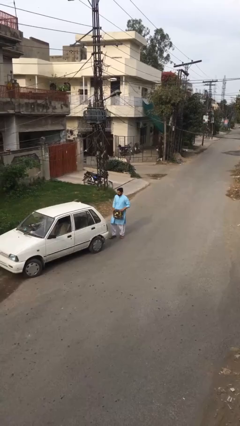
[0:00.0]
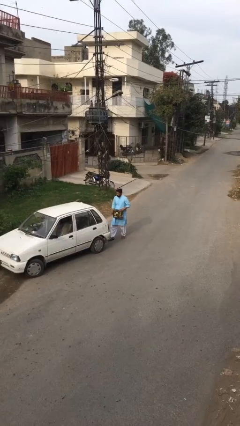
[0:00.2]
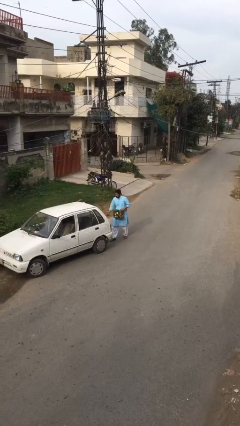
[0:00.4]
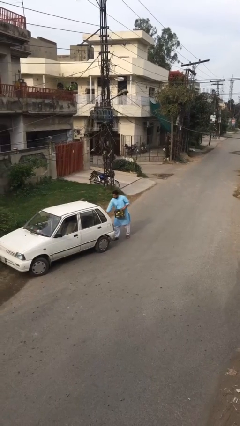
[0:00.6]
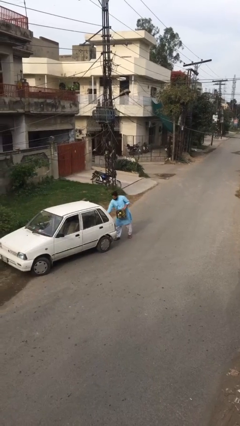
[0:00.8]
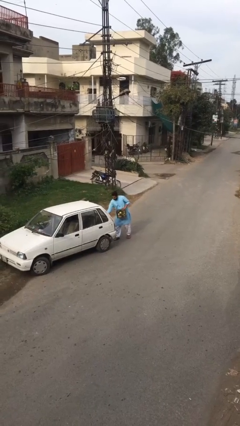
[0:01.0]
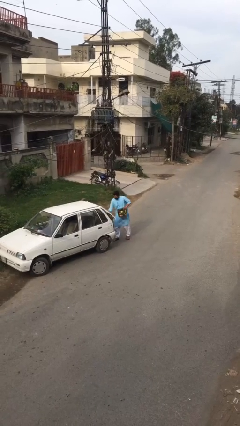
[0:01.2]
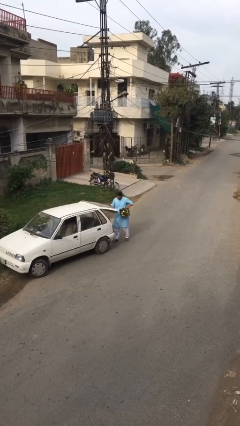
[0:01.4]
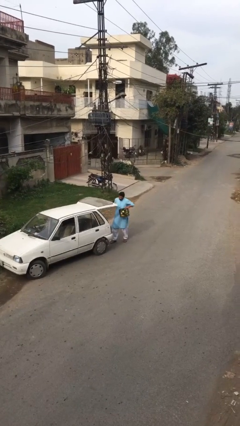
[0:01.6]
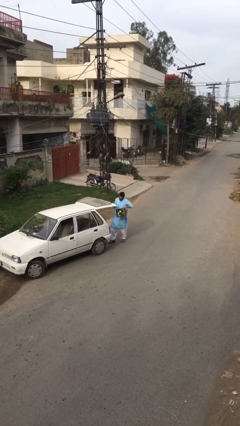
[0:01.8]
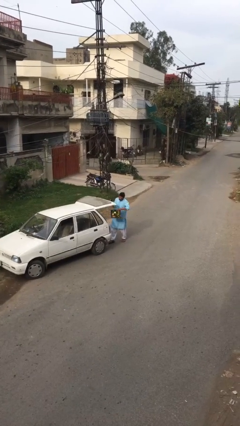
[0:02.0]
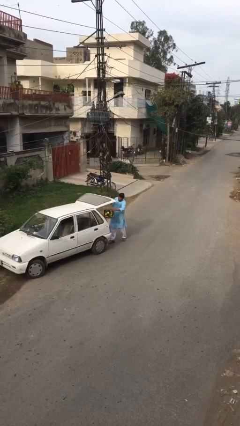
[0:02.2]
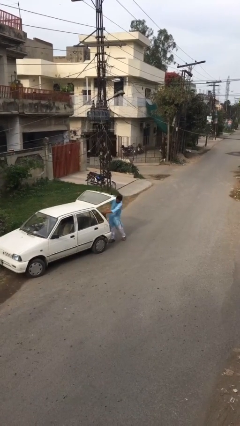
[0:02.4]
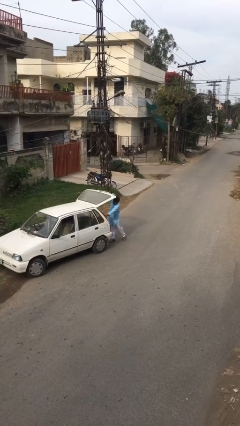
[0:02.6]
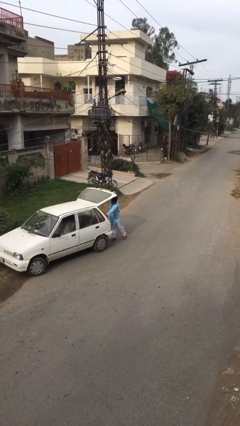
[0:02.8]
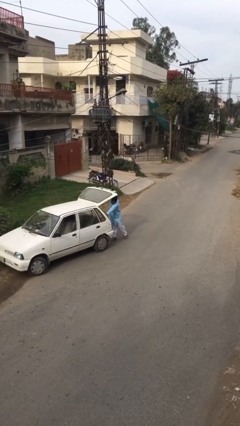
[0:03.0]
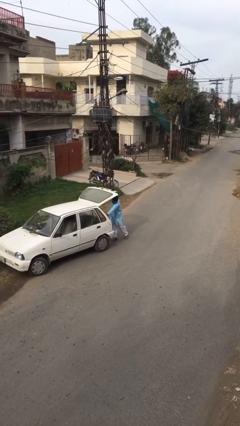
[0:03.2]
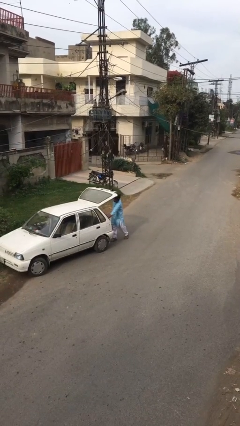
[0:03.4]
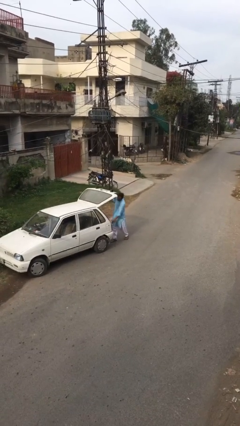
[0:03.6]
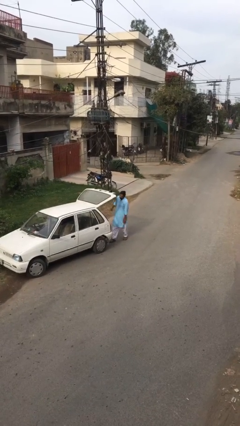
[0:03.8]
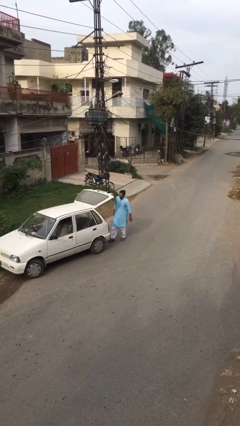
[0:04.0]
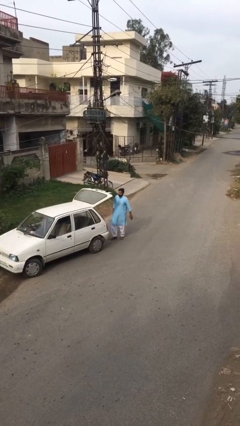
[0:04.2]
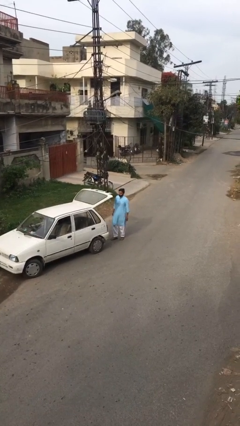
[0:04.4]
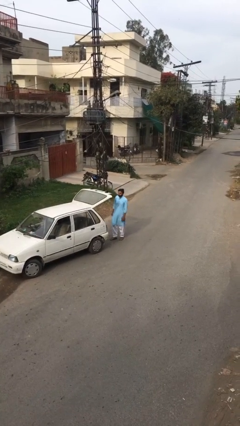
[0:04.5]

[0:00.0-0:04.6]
person loads car

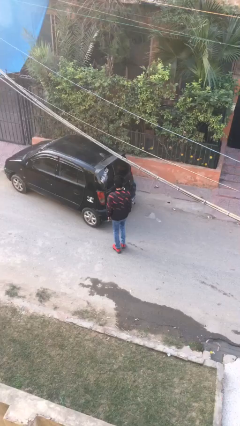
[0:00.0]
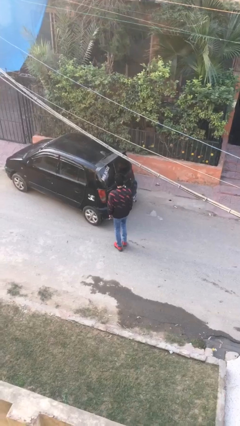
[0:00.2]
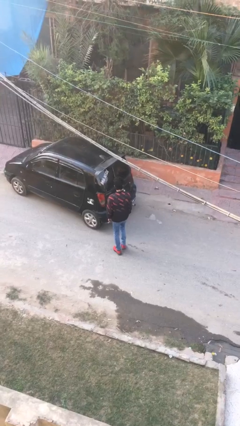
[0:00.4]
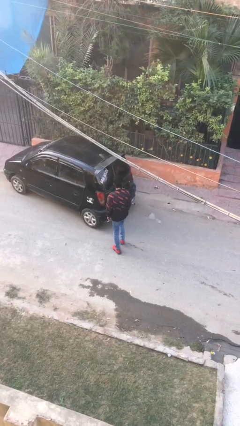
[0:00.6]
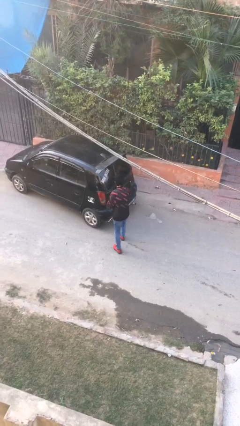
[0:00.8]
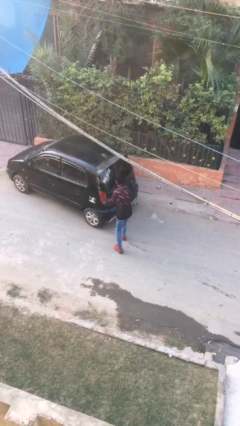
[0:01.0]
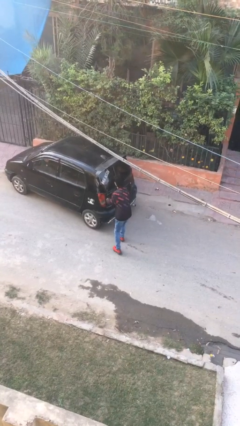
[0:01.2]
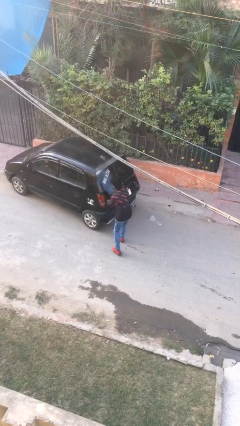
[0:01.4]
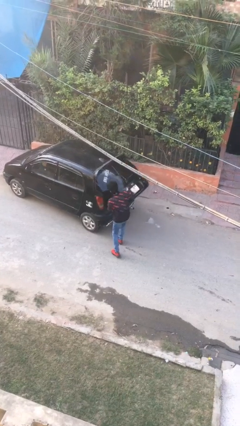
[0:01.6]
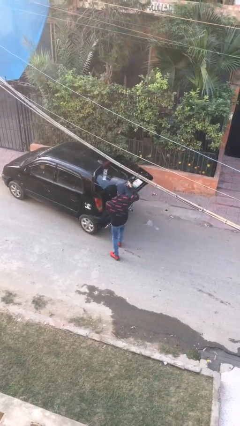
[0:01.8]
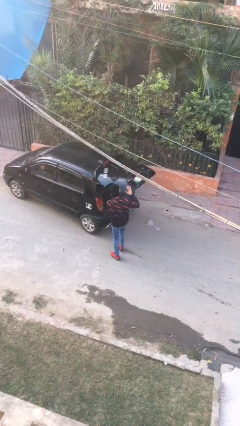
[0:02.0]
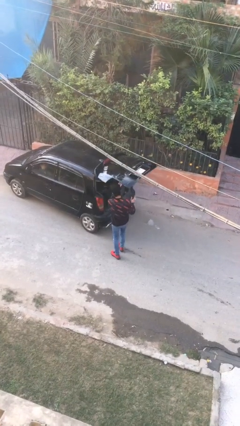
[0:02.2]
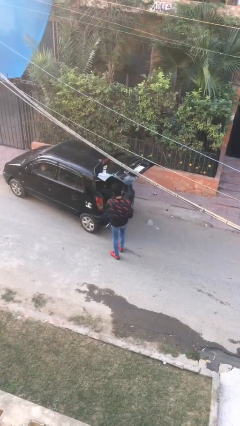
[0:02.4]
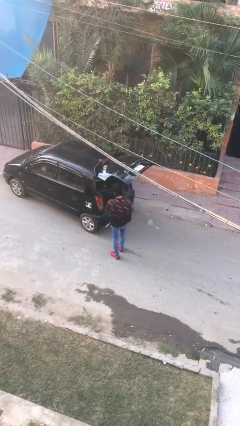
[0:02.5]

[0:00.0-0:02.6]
person opens car trunk

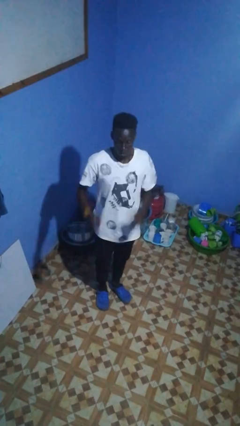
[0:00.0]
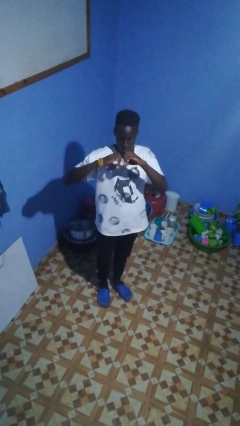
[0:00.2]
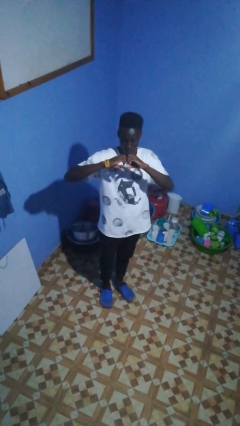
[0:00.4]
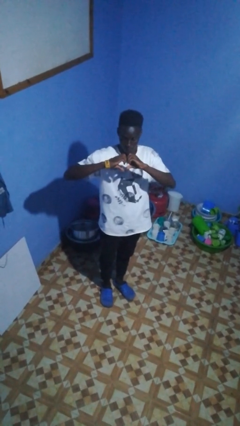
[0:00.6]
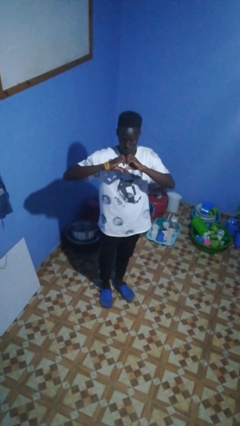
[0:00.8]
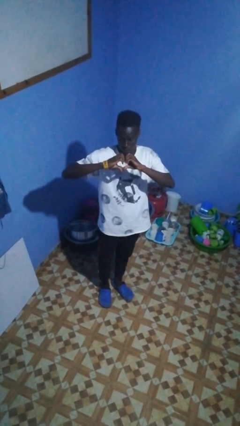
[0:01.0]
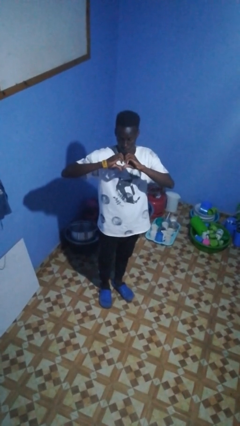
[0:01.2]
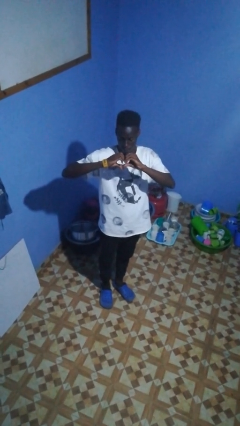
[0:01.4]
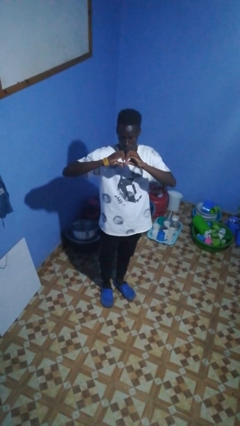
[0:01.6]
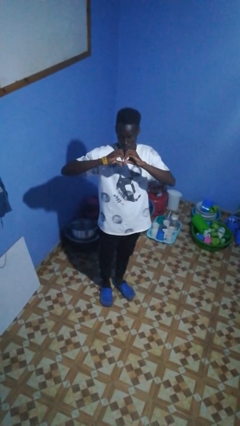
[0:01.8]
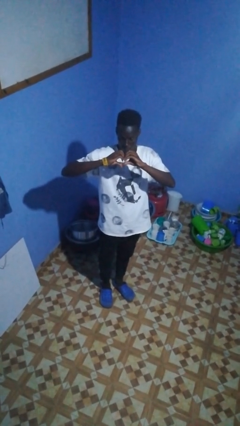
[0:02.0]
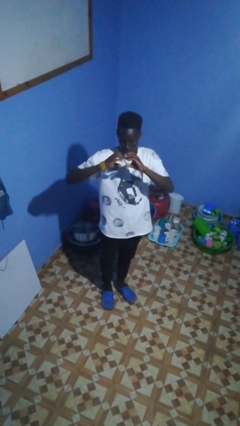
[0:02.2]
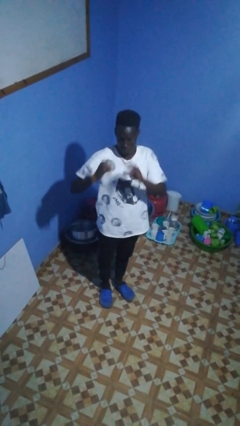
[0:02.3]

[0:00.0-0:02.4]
person gestures heart

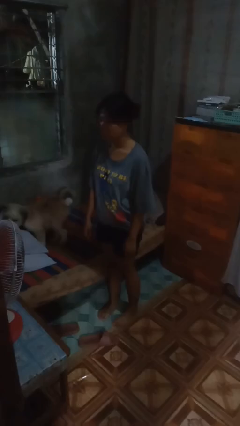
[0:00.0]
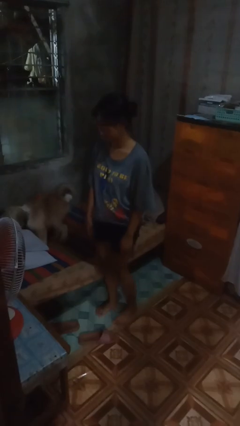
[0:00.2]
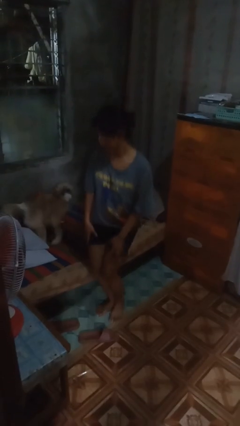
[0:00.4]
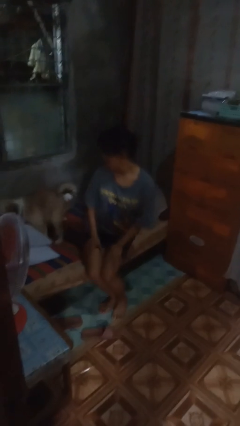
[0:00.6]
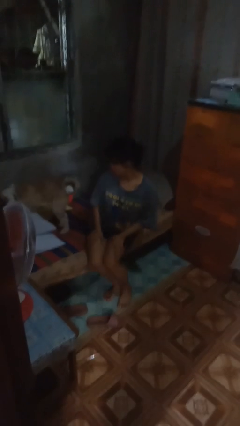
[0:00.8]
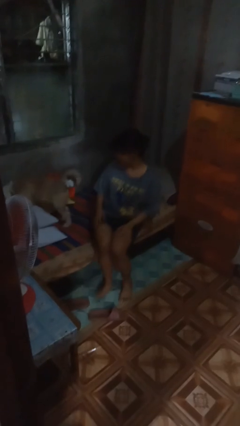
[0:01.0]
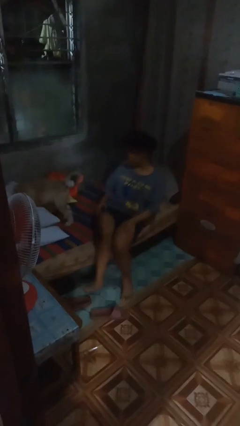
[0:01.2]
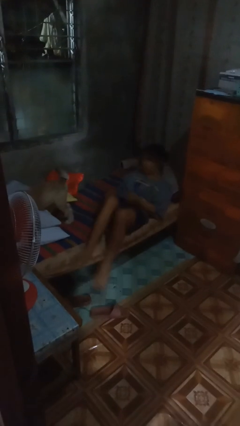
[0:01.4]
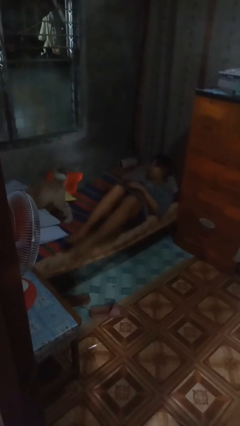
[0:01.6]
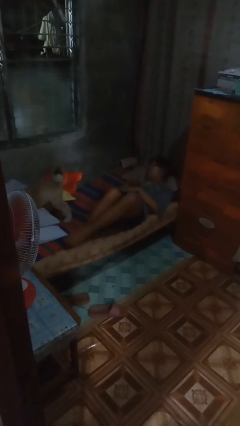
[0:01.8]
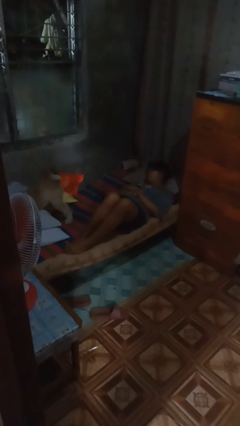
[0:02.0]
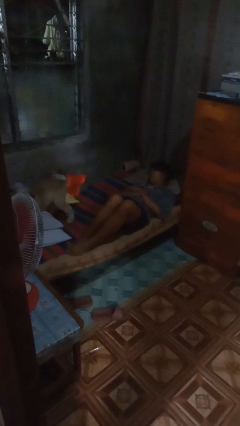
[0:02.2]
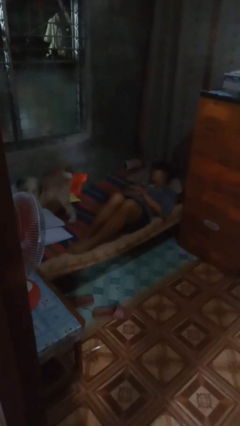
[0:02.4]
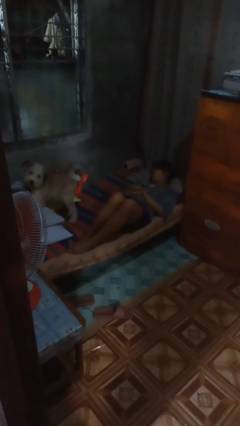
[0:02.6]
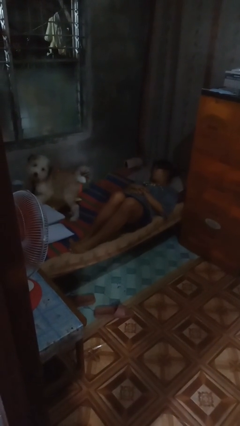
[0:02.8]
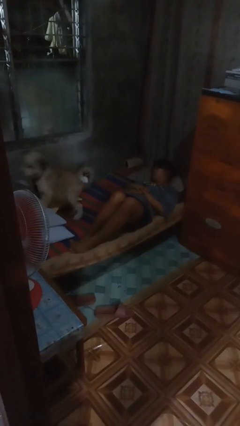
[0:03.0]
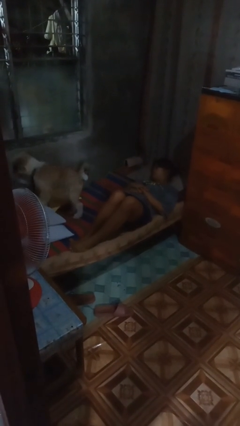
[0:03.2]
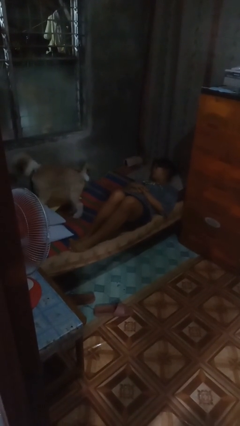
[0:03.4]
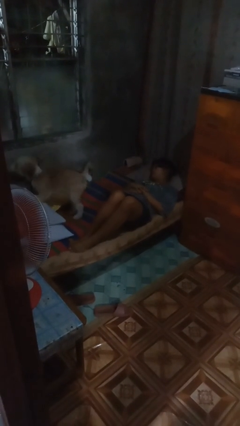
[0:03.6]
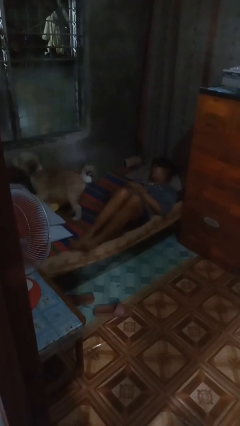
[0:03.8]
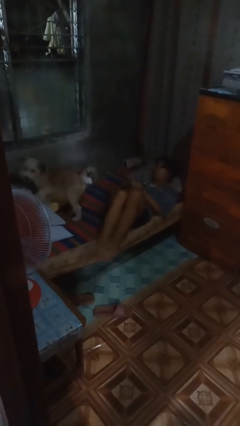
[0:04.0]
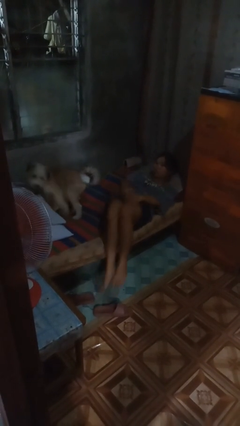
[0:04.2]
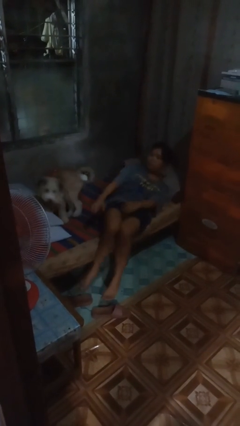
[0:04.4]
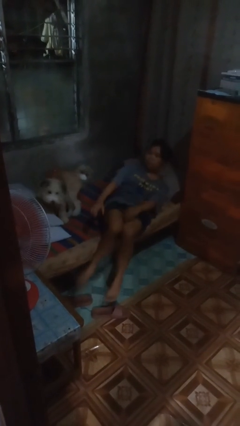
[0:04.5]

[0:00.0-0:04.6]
person lies down on bed

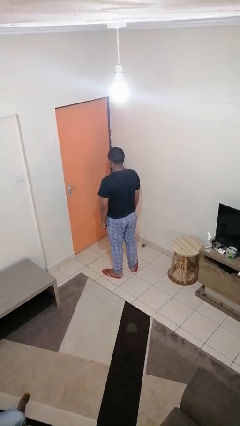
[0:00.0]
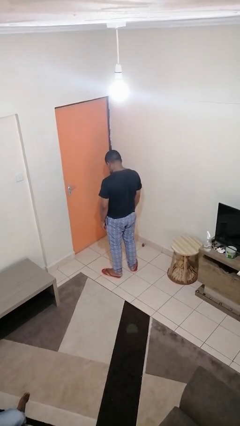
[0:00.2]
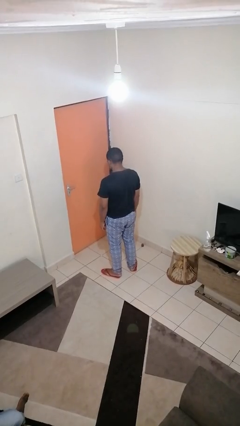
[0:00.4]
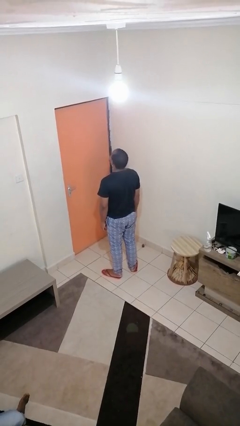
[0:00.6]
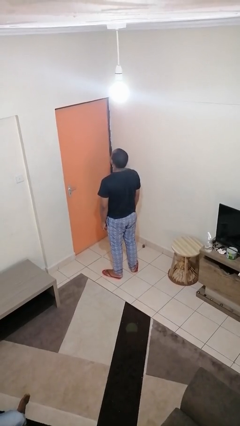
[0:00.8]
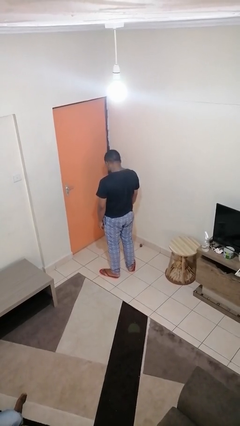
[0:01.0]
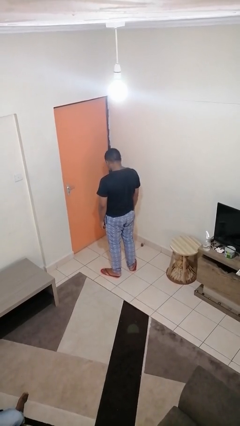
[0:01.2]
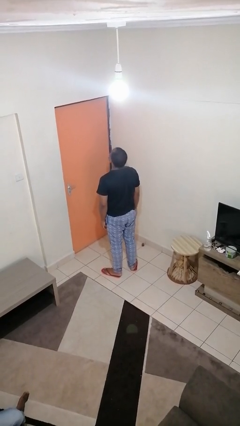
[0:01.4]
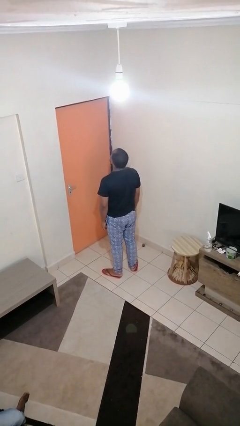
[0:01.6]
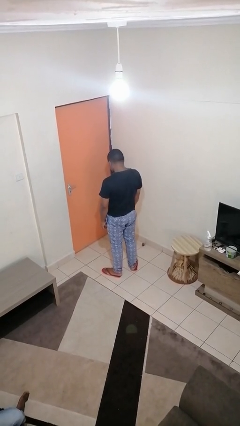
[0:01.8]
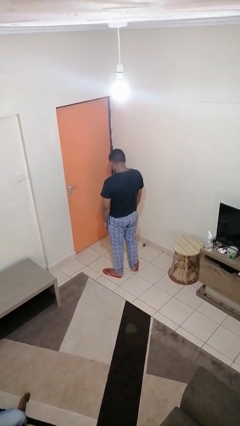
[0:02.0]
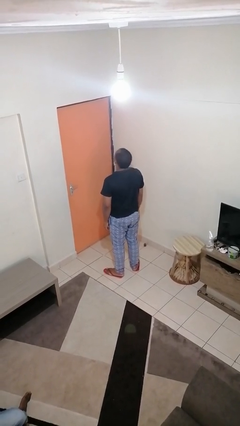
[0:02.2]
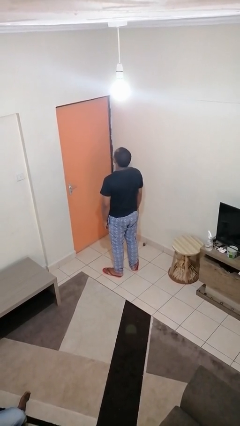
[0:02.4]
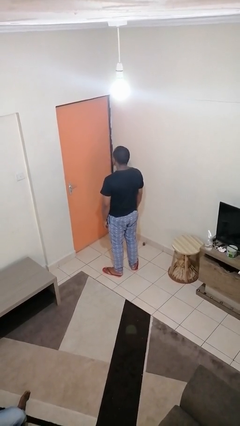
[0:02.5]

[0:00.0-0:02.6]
person nods head

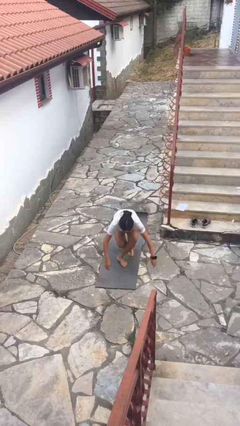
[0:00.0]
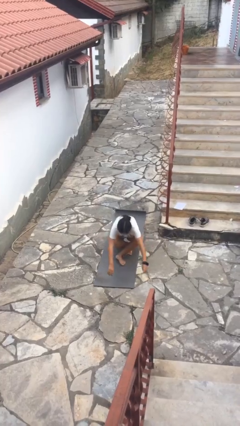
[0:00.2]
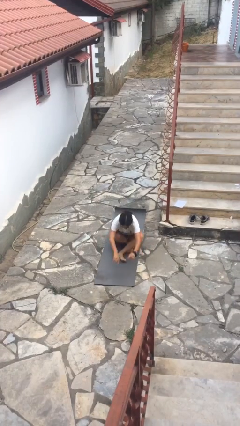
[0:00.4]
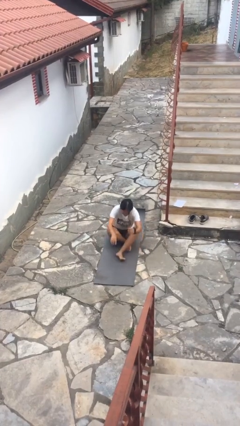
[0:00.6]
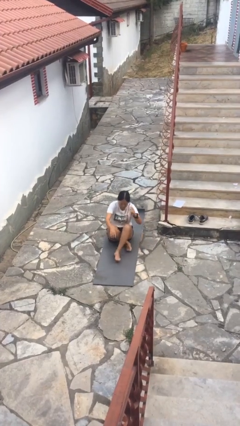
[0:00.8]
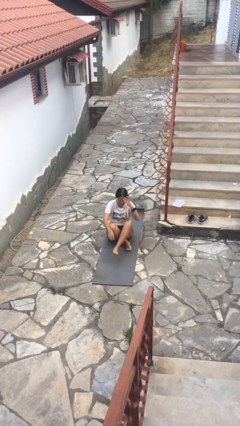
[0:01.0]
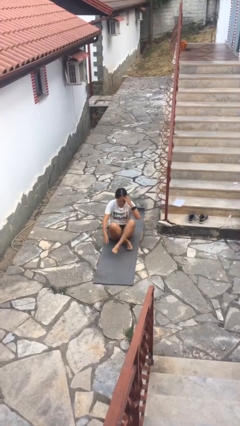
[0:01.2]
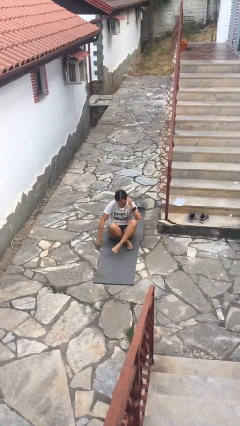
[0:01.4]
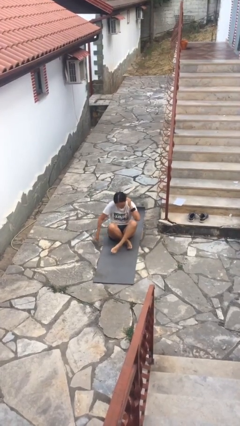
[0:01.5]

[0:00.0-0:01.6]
person sits crisscross
